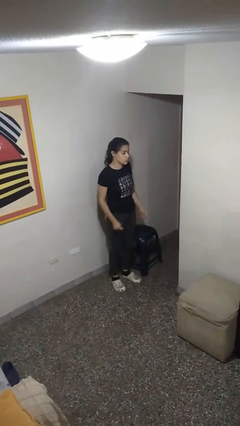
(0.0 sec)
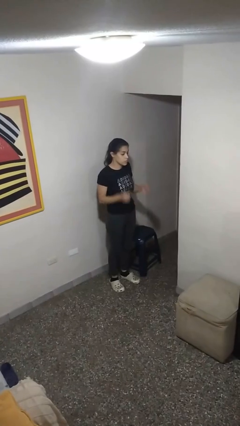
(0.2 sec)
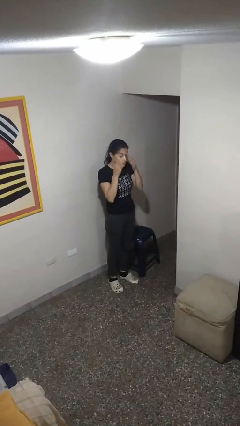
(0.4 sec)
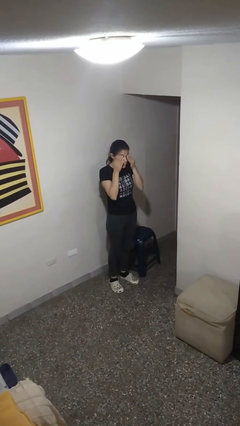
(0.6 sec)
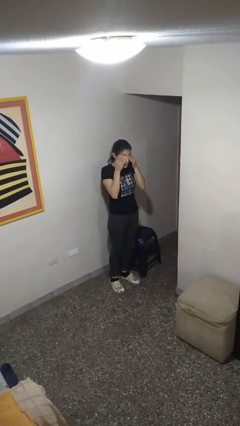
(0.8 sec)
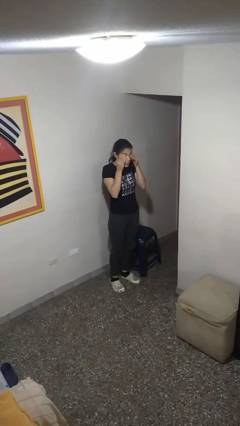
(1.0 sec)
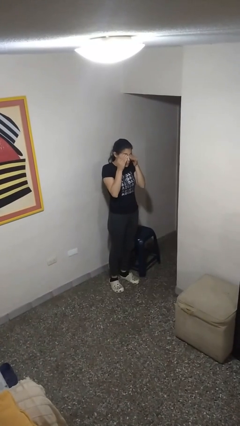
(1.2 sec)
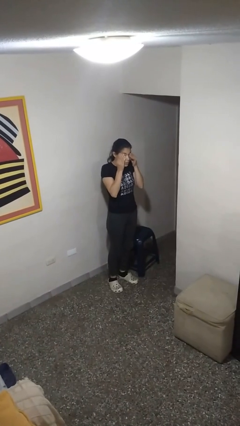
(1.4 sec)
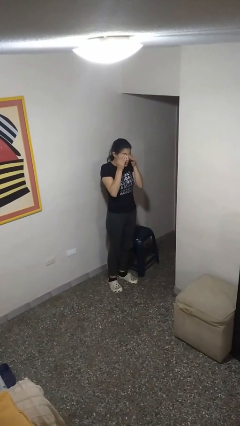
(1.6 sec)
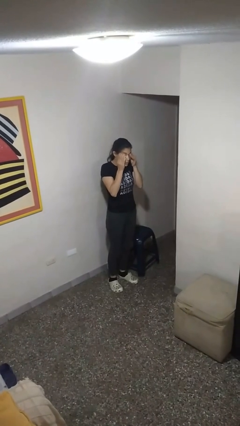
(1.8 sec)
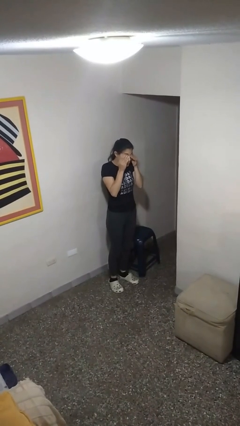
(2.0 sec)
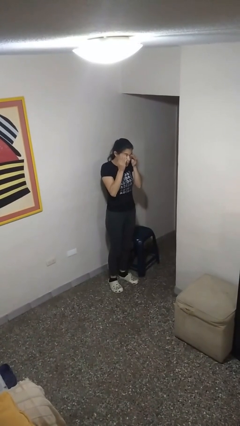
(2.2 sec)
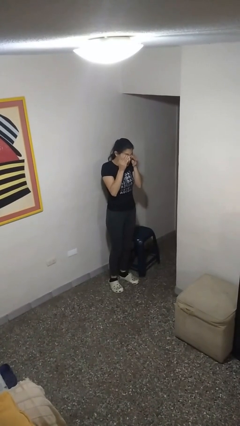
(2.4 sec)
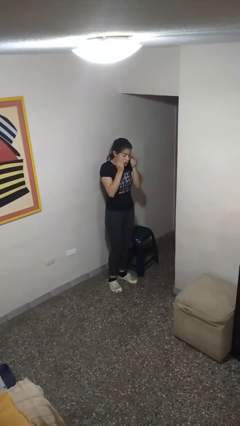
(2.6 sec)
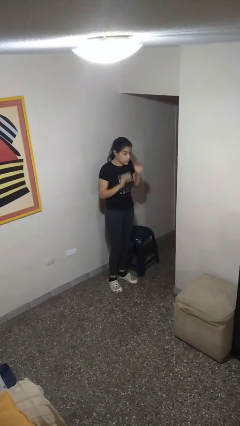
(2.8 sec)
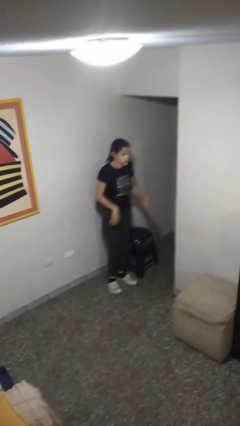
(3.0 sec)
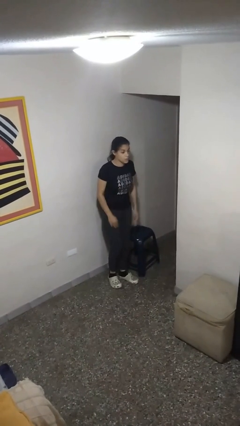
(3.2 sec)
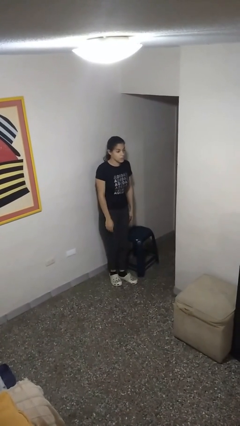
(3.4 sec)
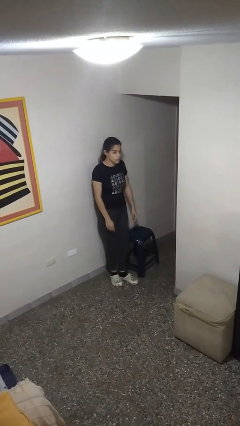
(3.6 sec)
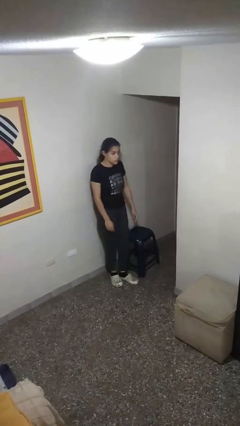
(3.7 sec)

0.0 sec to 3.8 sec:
person rubs eyes

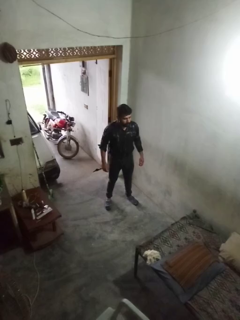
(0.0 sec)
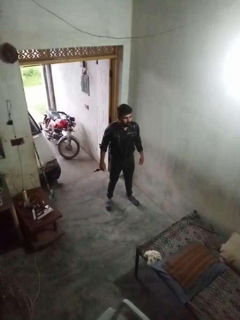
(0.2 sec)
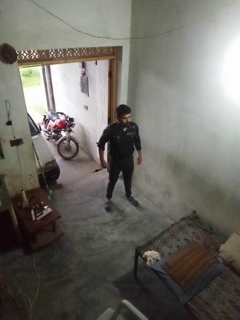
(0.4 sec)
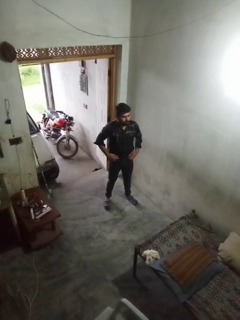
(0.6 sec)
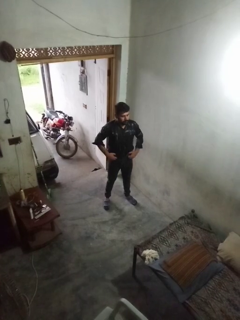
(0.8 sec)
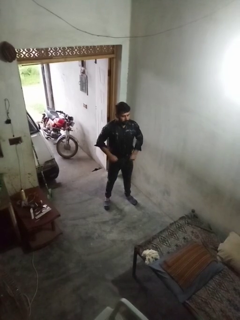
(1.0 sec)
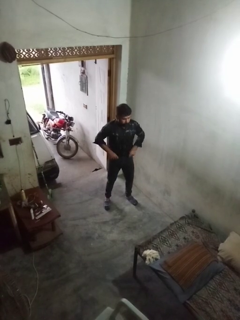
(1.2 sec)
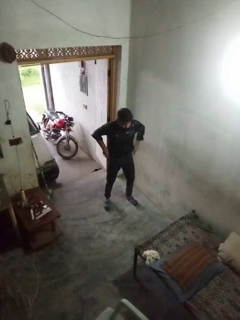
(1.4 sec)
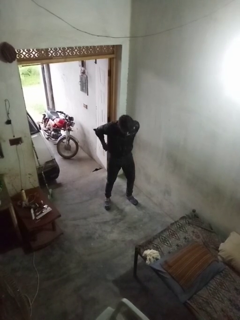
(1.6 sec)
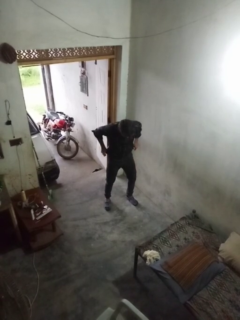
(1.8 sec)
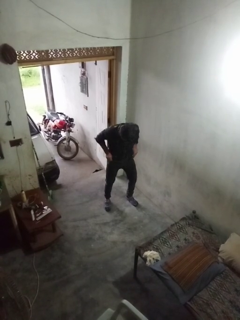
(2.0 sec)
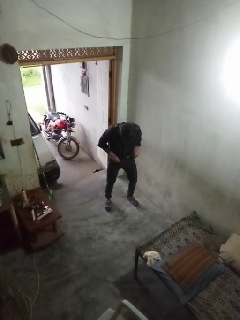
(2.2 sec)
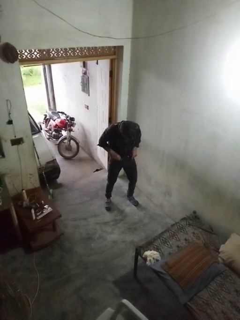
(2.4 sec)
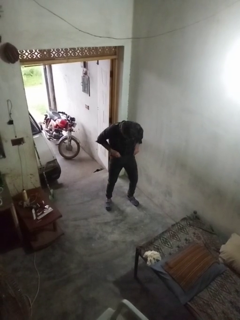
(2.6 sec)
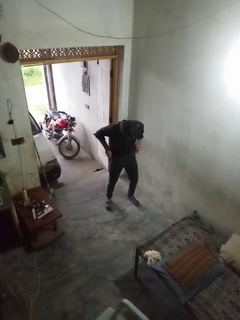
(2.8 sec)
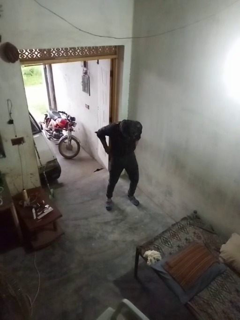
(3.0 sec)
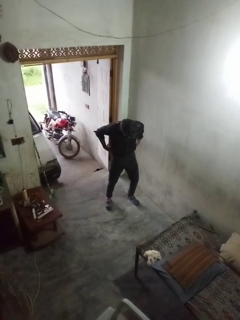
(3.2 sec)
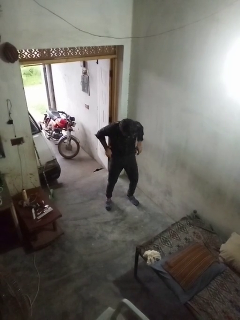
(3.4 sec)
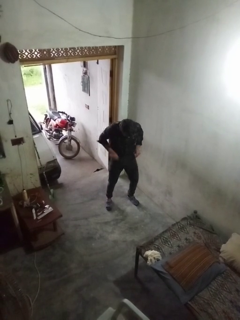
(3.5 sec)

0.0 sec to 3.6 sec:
person hikes up pants

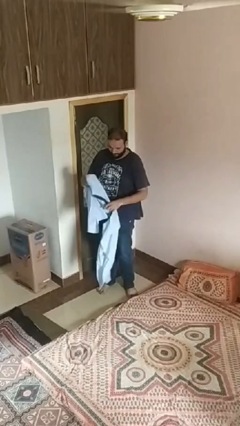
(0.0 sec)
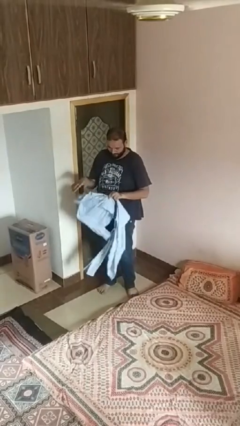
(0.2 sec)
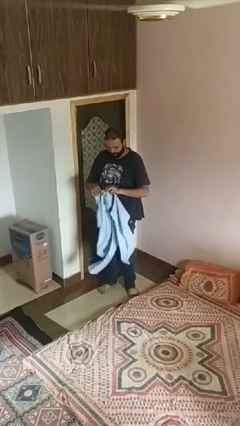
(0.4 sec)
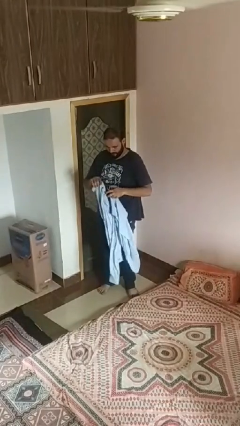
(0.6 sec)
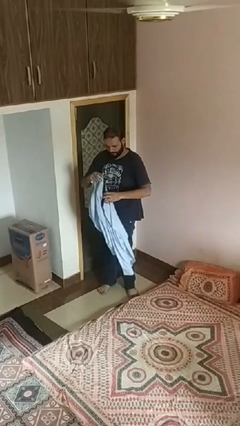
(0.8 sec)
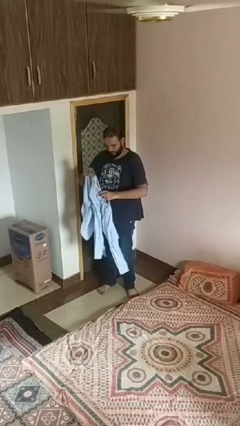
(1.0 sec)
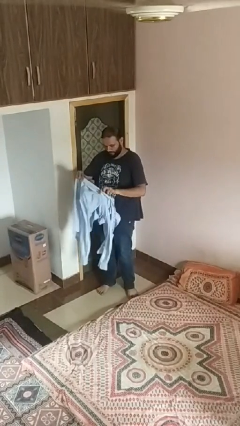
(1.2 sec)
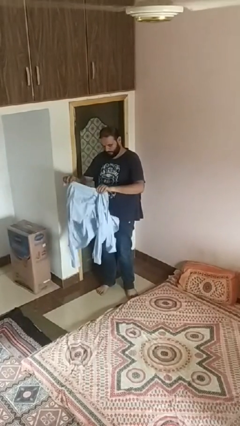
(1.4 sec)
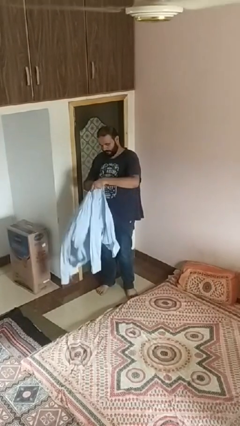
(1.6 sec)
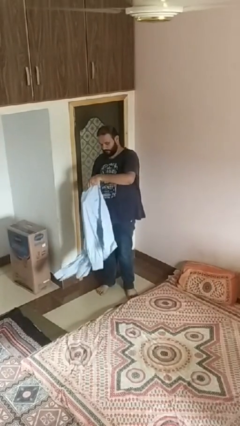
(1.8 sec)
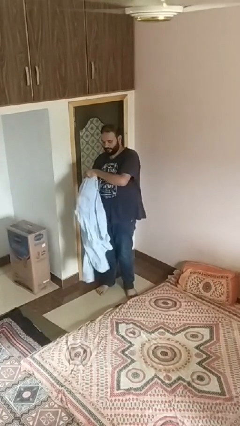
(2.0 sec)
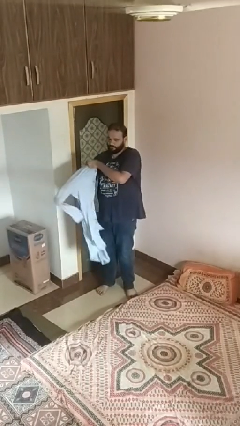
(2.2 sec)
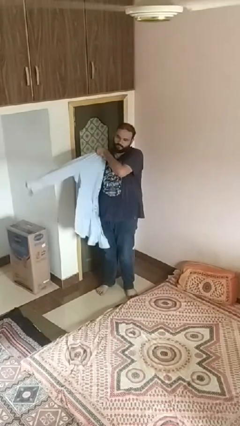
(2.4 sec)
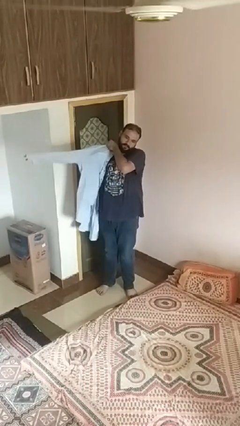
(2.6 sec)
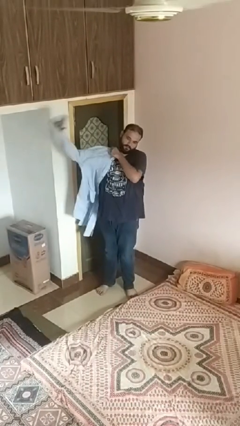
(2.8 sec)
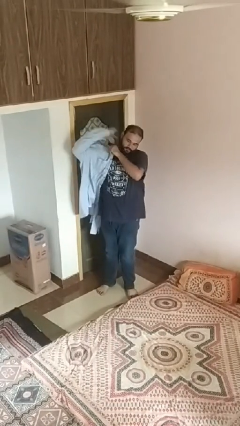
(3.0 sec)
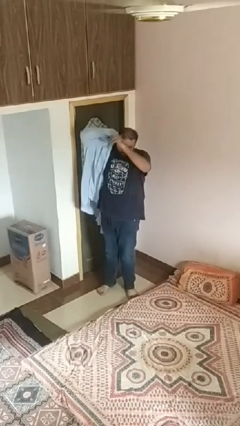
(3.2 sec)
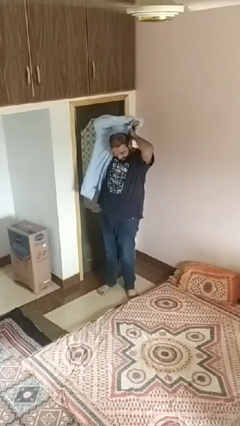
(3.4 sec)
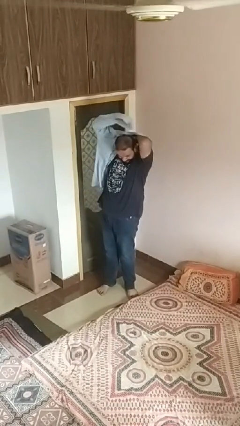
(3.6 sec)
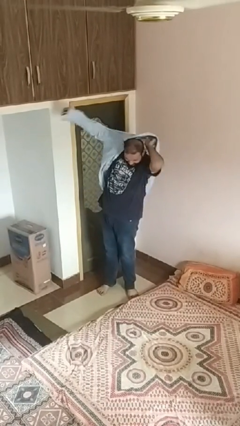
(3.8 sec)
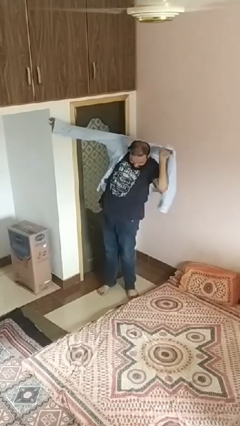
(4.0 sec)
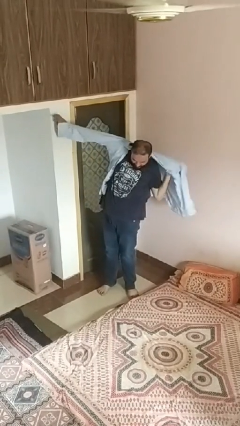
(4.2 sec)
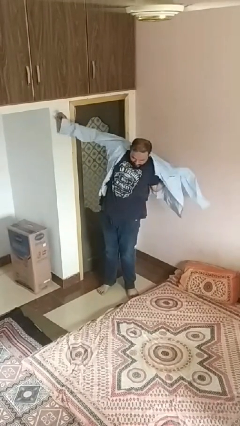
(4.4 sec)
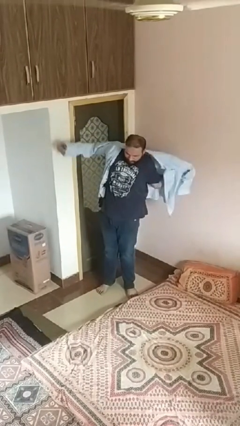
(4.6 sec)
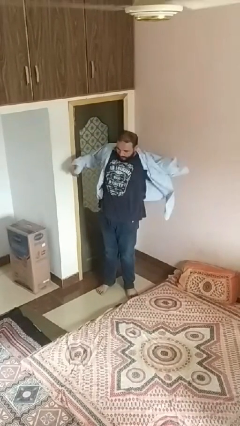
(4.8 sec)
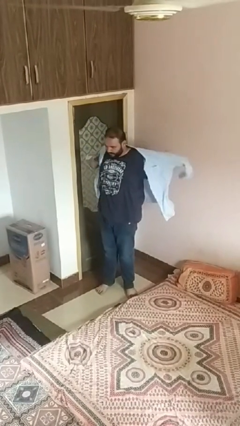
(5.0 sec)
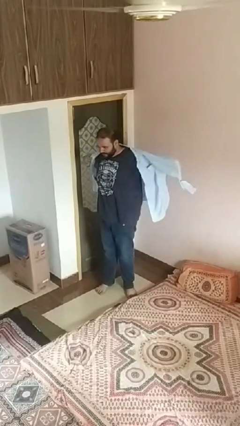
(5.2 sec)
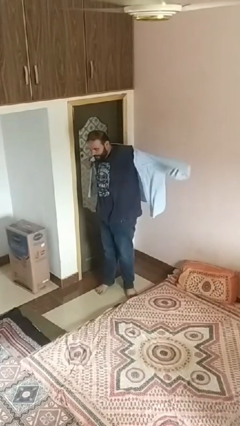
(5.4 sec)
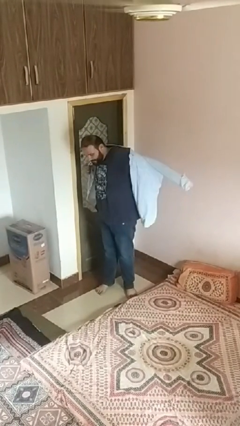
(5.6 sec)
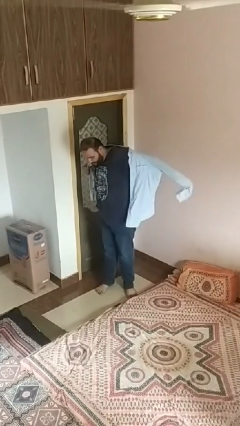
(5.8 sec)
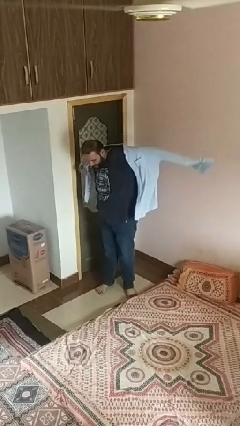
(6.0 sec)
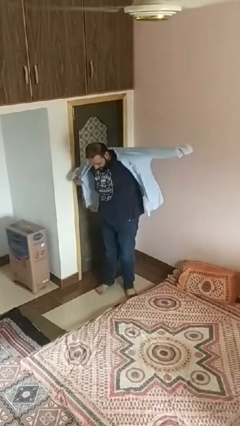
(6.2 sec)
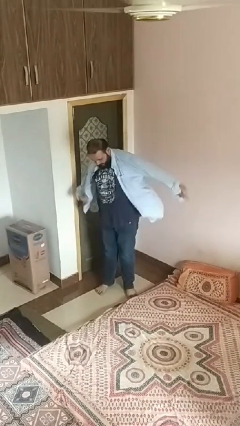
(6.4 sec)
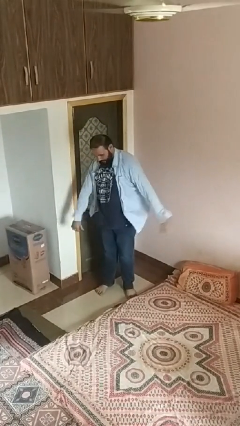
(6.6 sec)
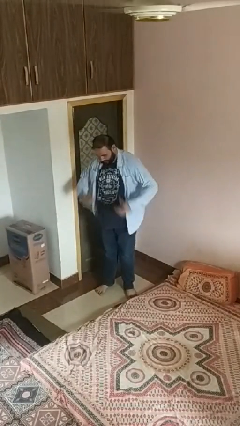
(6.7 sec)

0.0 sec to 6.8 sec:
person puts on shirt

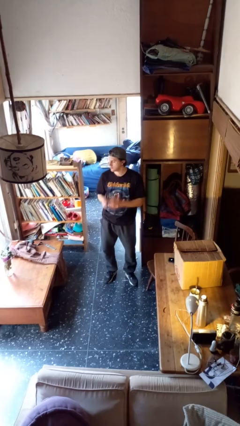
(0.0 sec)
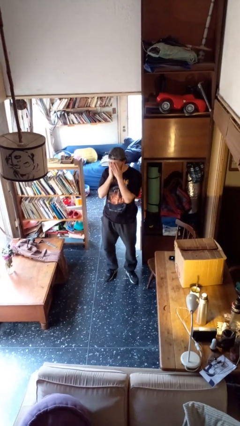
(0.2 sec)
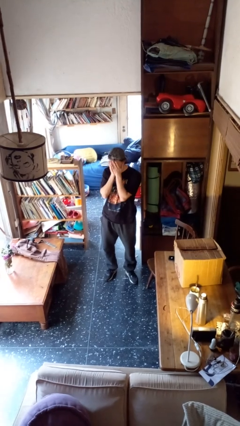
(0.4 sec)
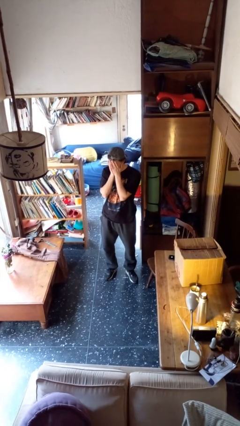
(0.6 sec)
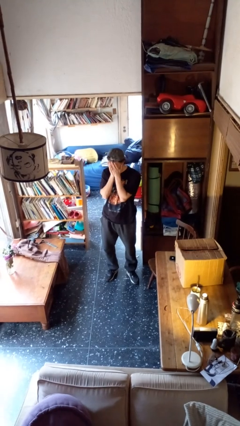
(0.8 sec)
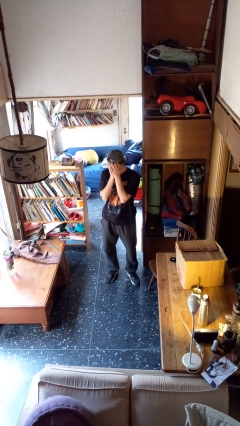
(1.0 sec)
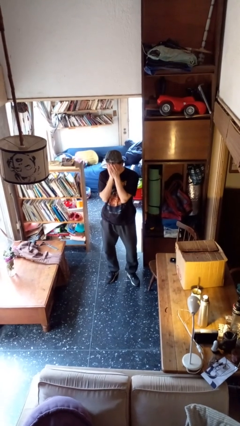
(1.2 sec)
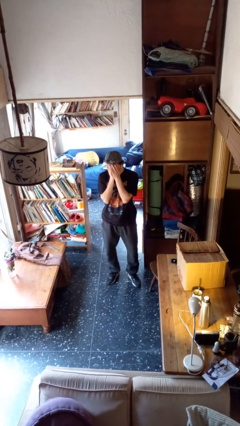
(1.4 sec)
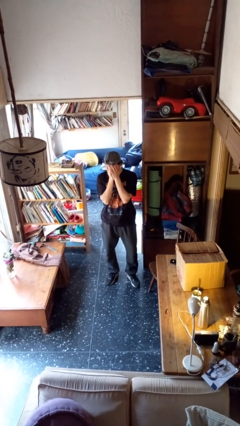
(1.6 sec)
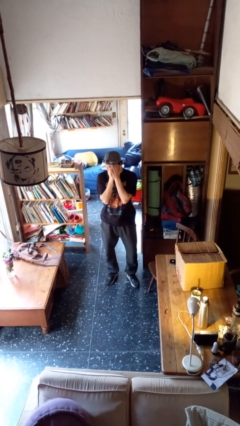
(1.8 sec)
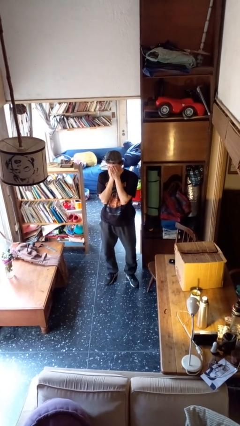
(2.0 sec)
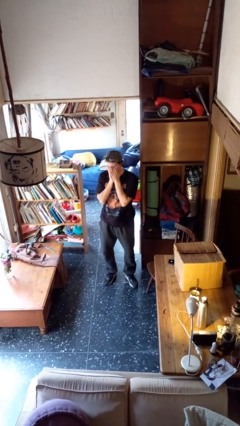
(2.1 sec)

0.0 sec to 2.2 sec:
person covers face with hands

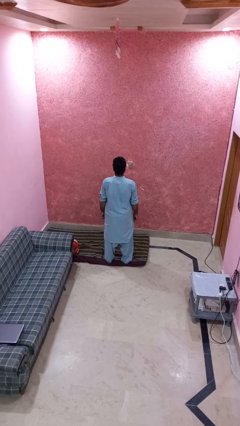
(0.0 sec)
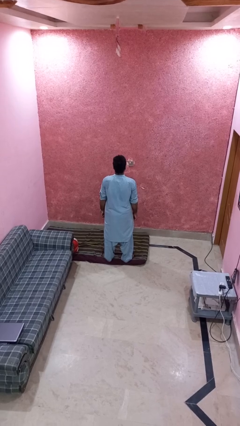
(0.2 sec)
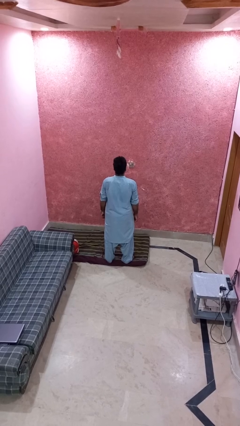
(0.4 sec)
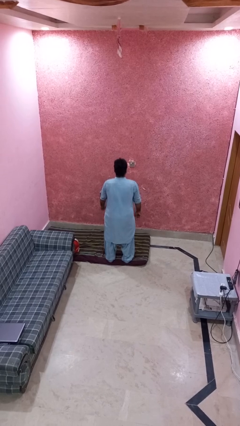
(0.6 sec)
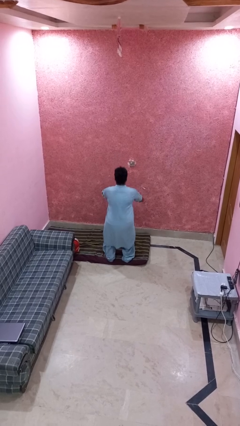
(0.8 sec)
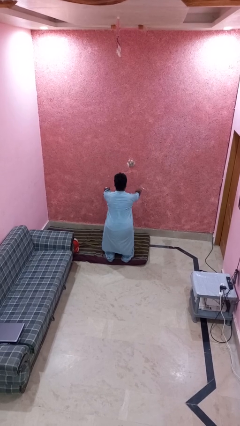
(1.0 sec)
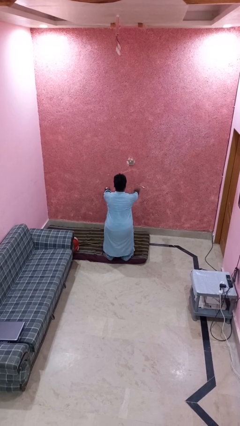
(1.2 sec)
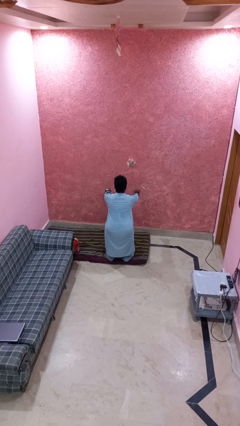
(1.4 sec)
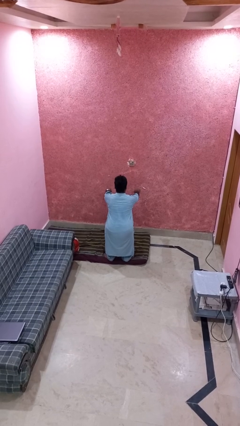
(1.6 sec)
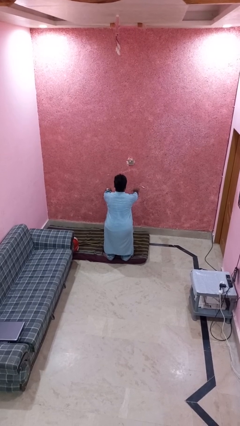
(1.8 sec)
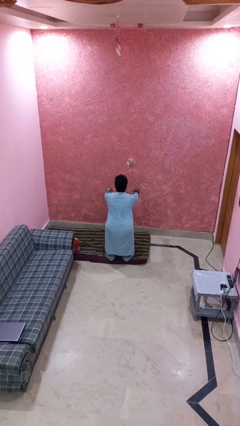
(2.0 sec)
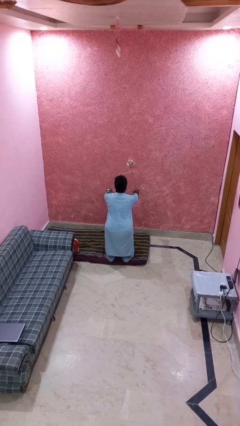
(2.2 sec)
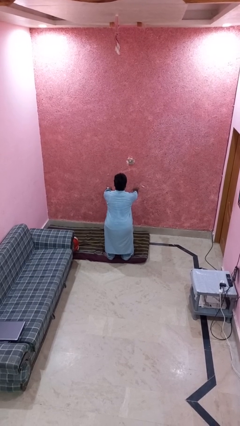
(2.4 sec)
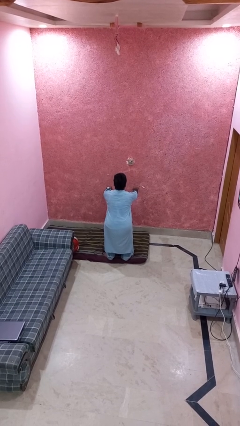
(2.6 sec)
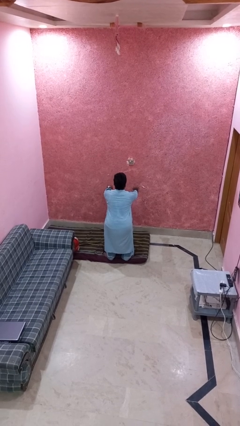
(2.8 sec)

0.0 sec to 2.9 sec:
person squats
